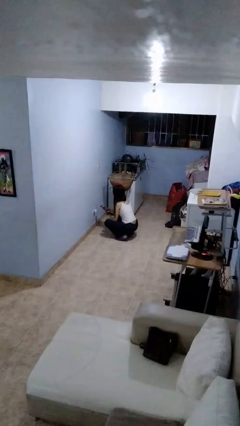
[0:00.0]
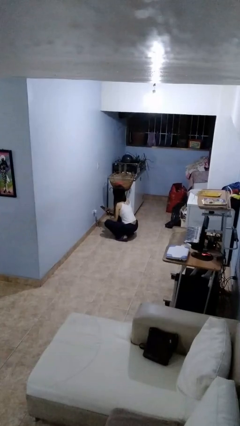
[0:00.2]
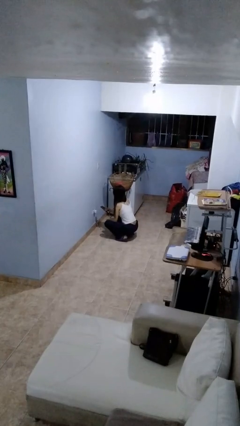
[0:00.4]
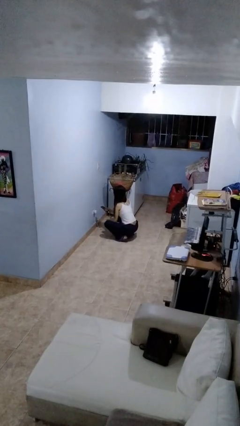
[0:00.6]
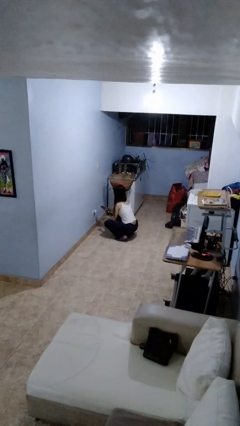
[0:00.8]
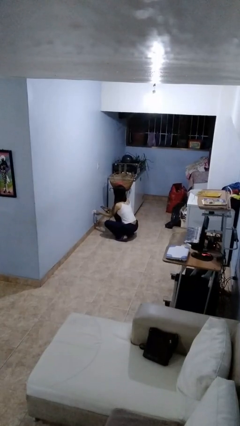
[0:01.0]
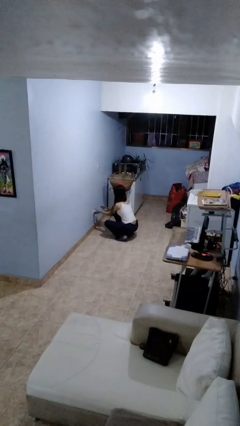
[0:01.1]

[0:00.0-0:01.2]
person unplugs from electrical socket

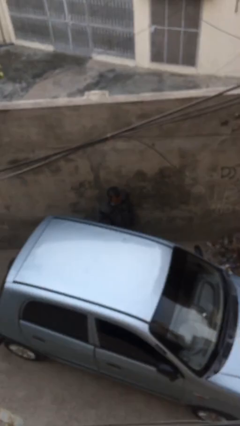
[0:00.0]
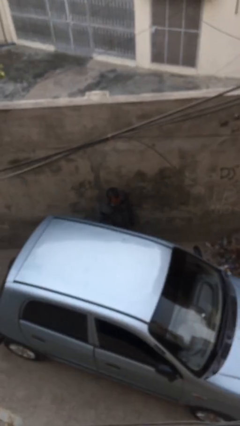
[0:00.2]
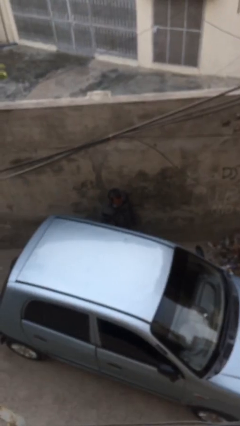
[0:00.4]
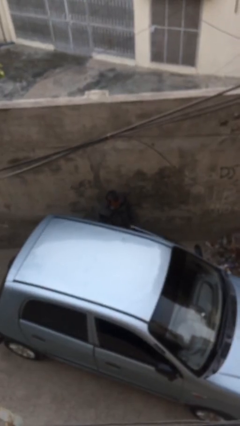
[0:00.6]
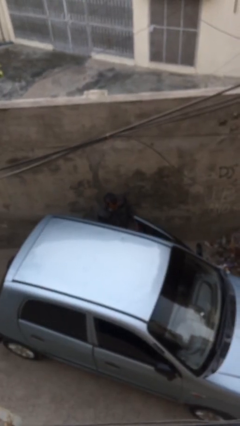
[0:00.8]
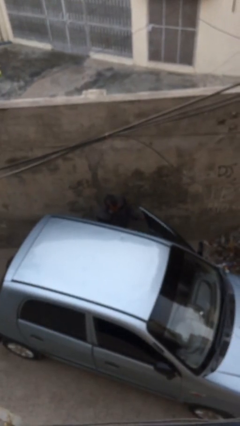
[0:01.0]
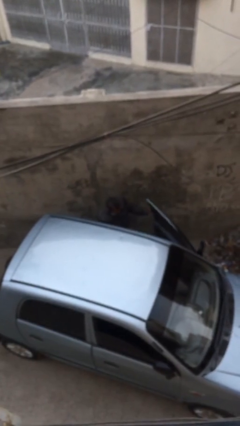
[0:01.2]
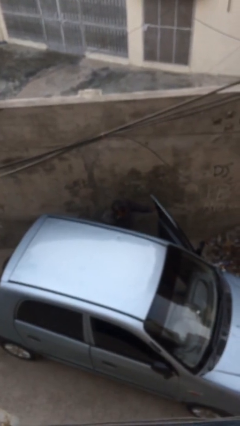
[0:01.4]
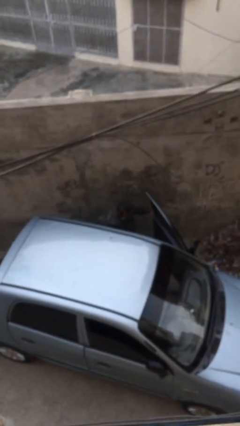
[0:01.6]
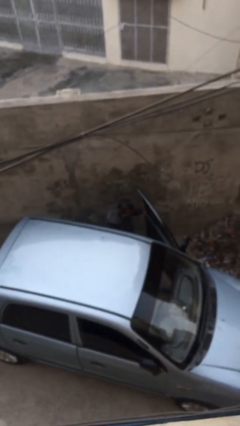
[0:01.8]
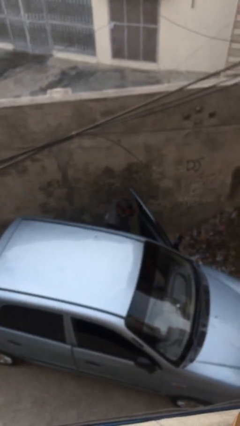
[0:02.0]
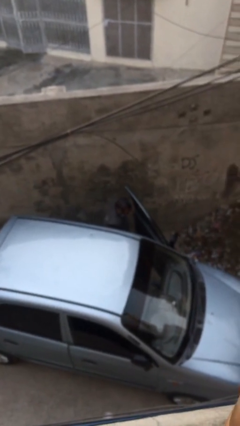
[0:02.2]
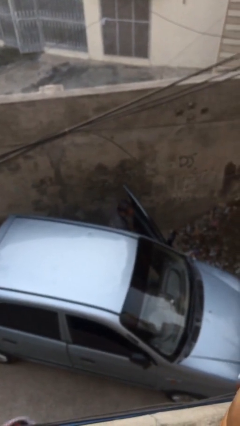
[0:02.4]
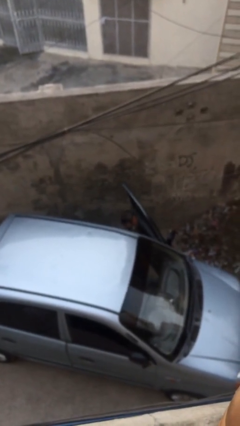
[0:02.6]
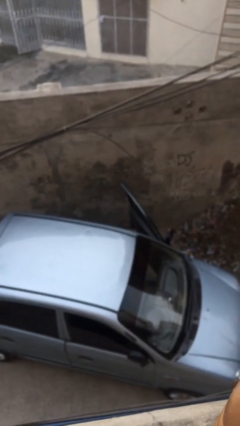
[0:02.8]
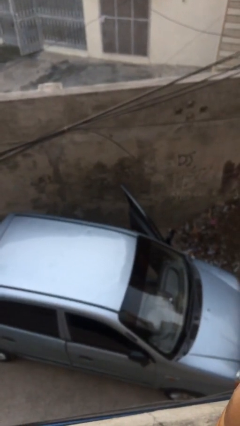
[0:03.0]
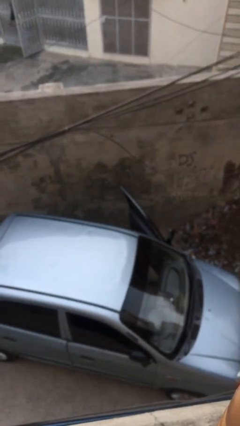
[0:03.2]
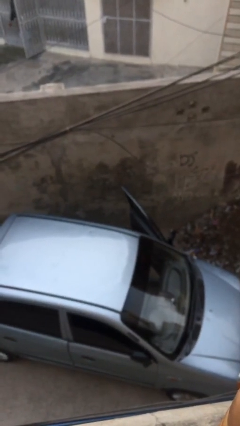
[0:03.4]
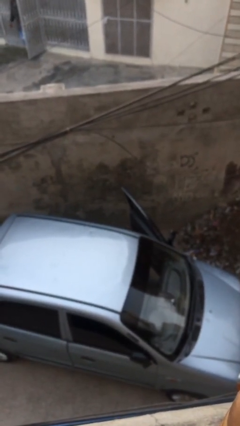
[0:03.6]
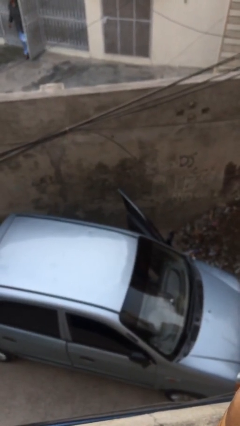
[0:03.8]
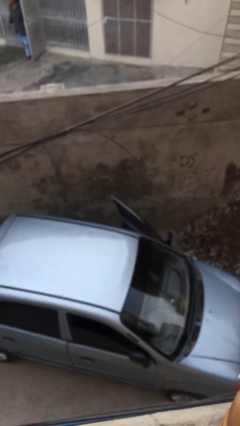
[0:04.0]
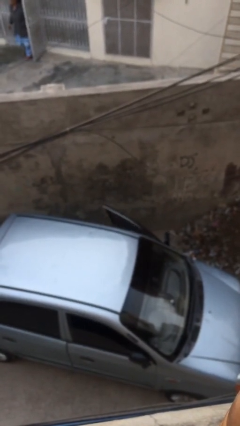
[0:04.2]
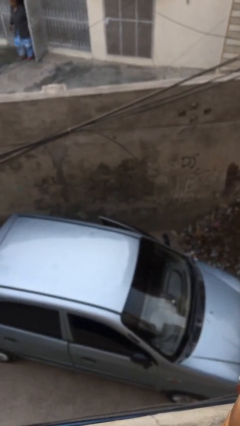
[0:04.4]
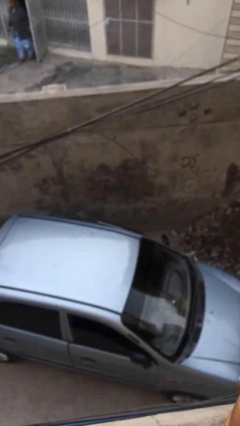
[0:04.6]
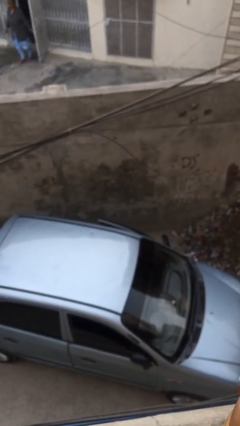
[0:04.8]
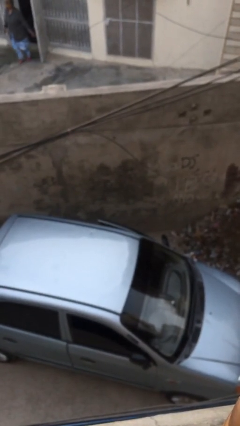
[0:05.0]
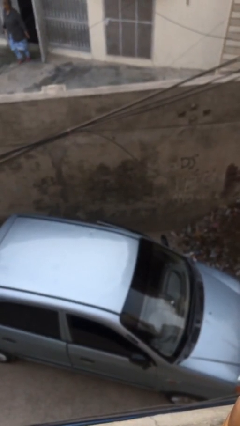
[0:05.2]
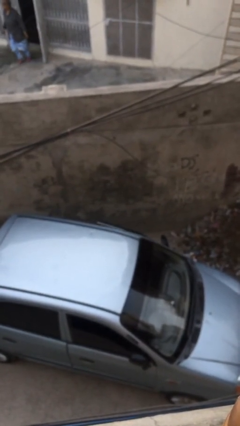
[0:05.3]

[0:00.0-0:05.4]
car picks up person

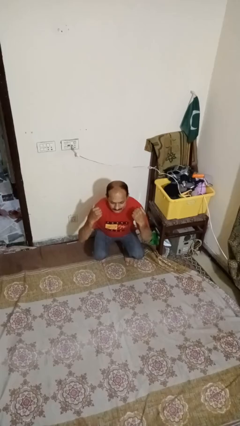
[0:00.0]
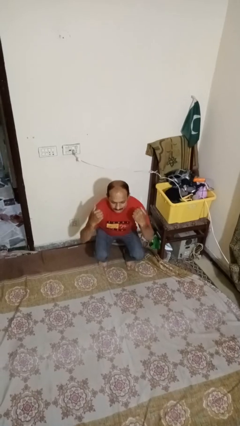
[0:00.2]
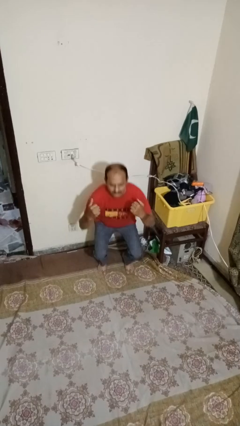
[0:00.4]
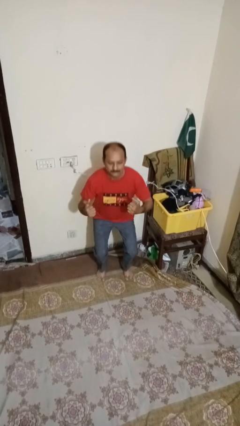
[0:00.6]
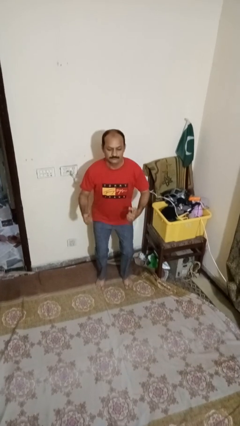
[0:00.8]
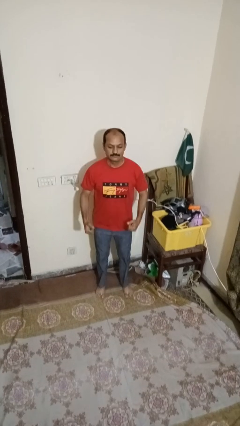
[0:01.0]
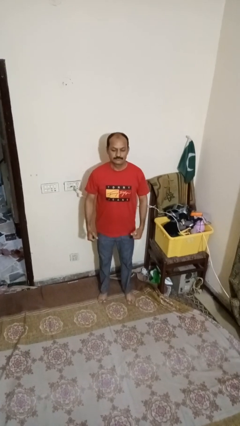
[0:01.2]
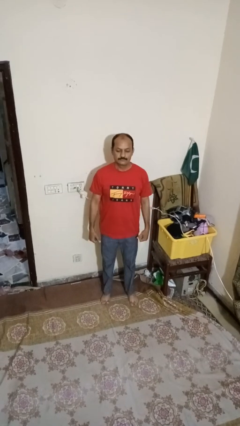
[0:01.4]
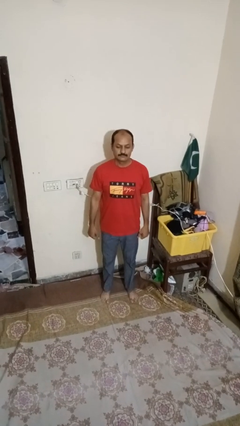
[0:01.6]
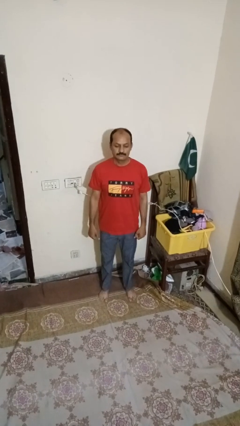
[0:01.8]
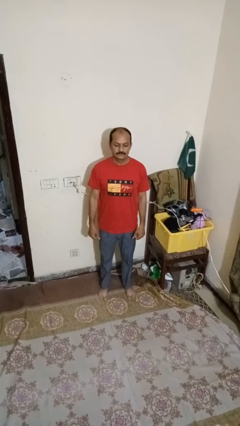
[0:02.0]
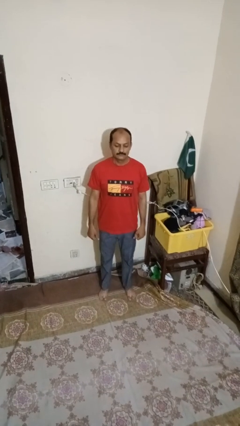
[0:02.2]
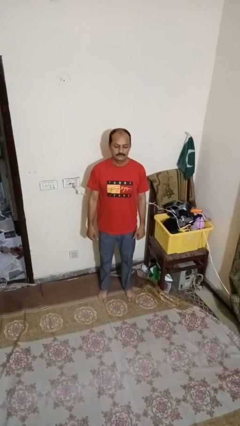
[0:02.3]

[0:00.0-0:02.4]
person stands up

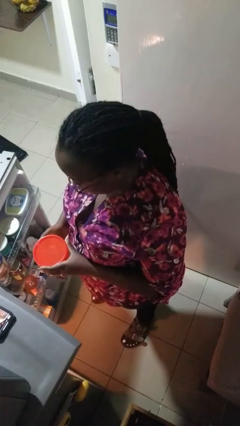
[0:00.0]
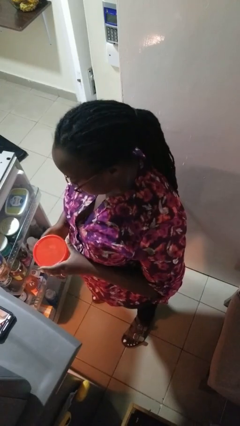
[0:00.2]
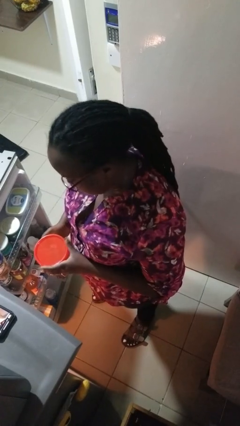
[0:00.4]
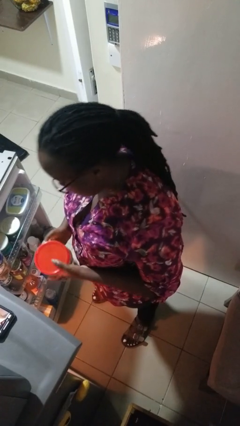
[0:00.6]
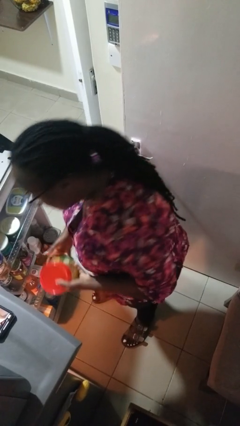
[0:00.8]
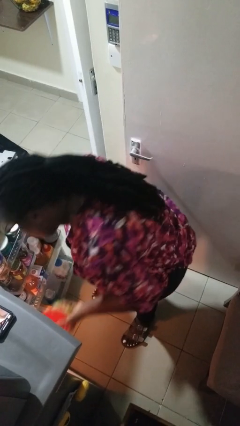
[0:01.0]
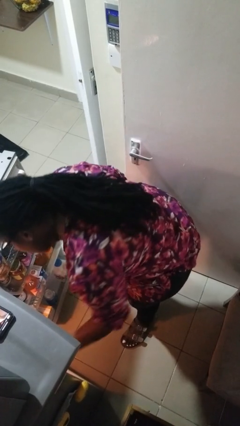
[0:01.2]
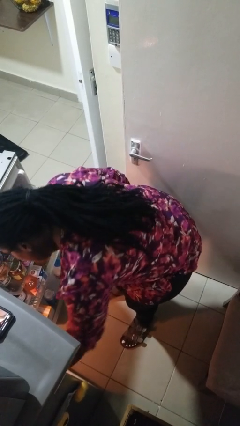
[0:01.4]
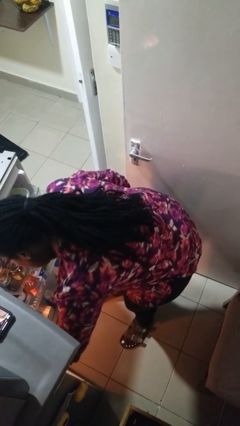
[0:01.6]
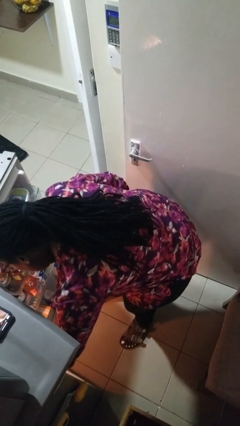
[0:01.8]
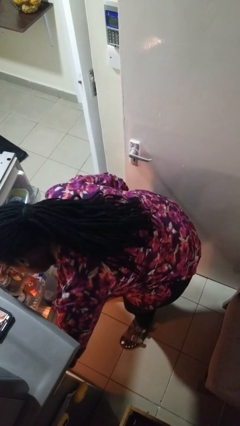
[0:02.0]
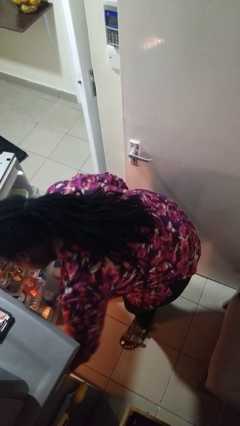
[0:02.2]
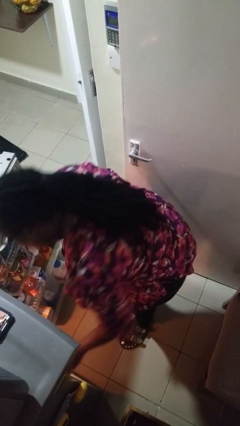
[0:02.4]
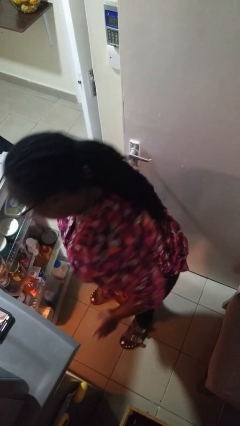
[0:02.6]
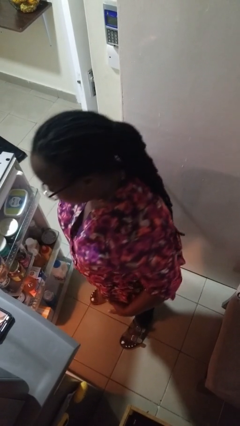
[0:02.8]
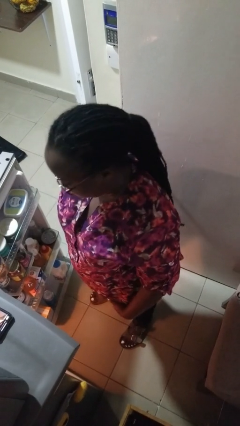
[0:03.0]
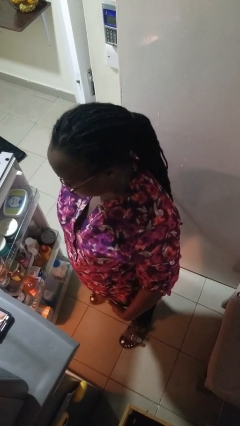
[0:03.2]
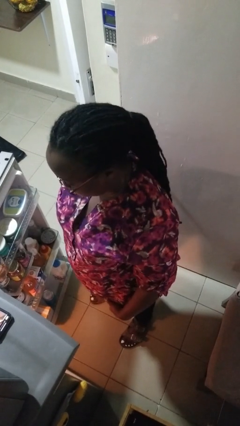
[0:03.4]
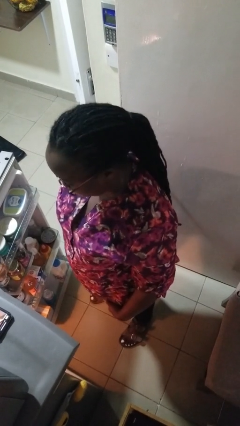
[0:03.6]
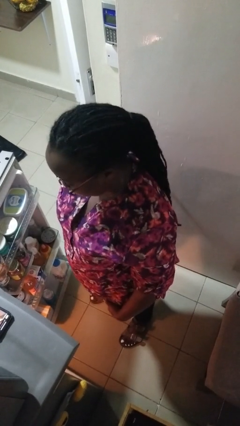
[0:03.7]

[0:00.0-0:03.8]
person puts object into refrigerator

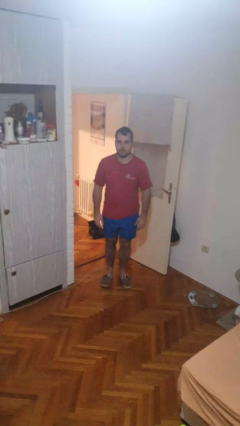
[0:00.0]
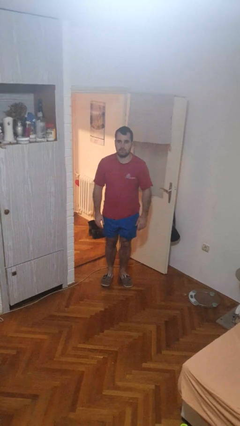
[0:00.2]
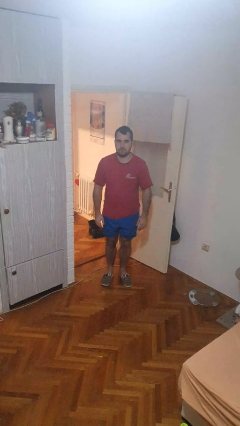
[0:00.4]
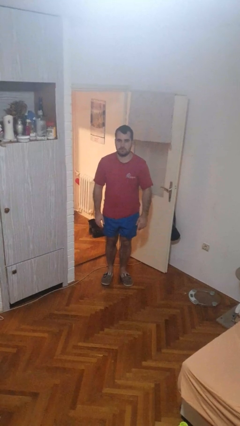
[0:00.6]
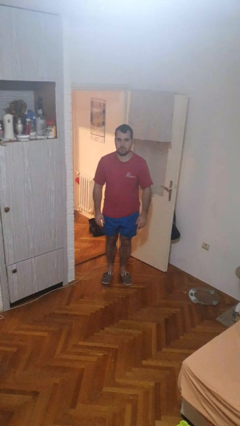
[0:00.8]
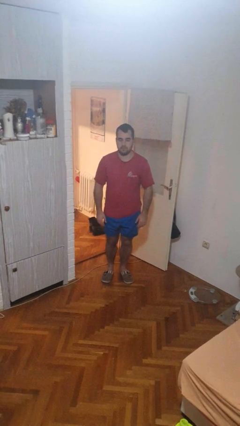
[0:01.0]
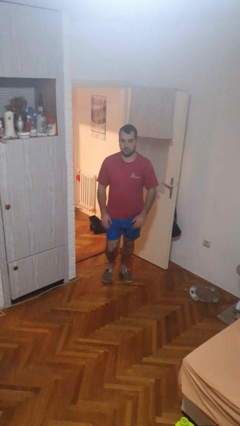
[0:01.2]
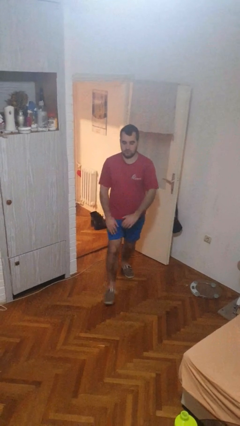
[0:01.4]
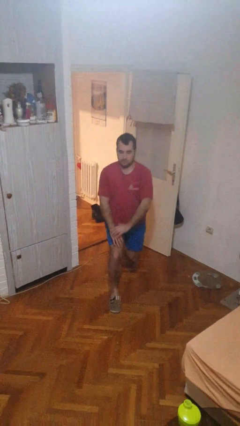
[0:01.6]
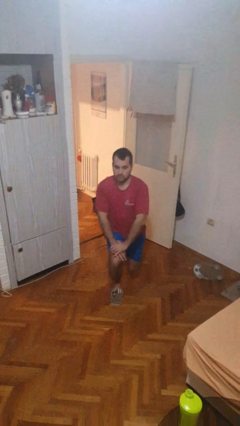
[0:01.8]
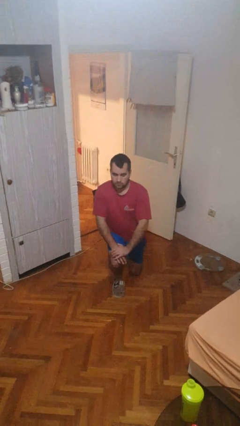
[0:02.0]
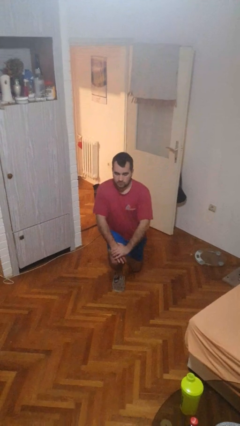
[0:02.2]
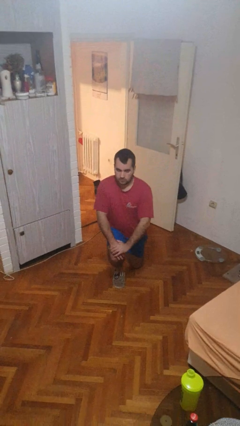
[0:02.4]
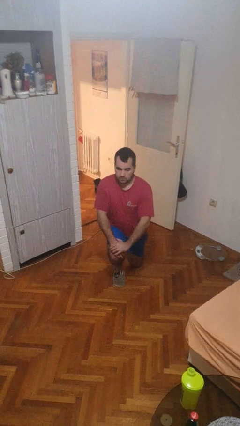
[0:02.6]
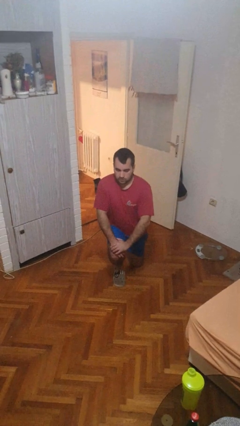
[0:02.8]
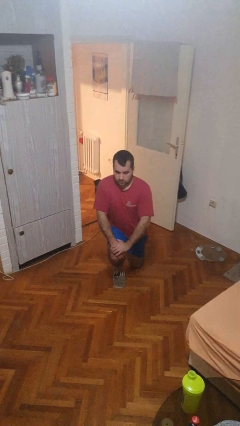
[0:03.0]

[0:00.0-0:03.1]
person kneels

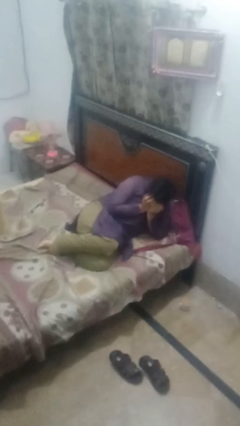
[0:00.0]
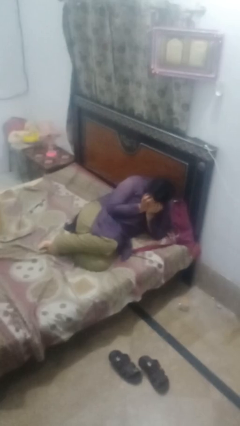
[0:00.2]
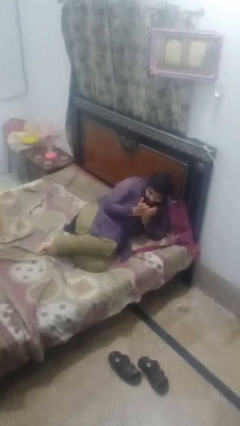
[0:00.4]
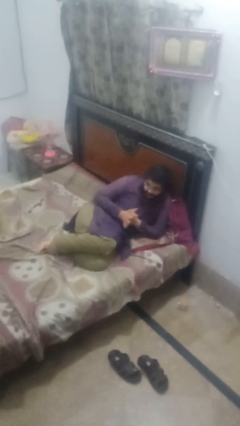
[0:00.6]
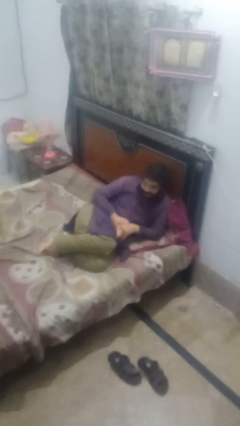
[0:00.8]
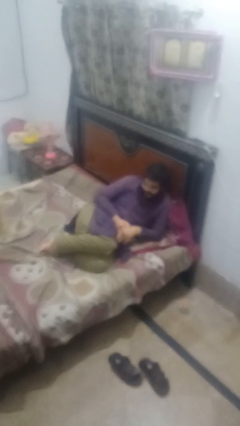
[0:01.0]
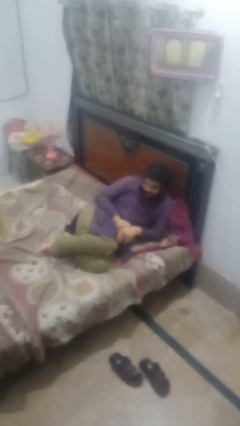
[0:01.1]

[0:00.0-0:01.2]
person covers face with hands
